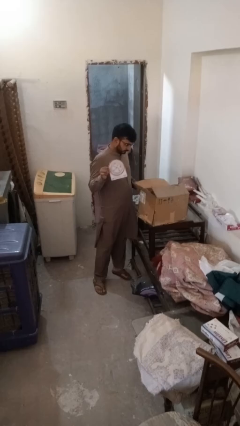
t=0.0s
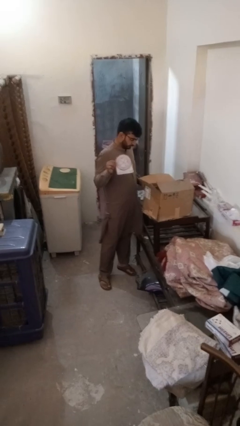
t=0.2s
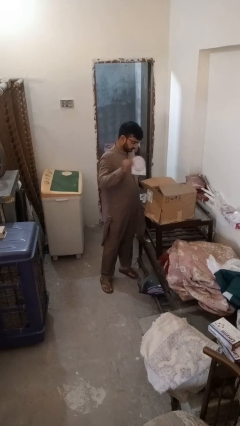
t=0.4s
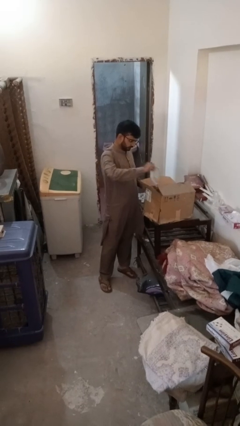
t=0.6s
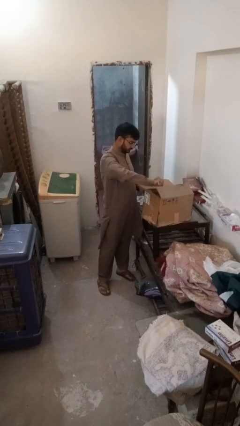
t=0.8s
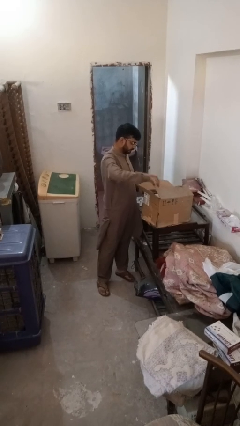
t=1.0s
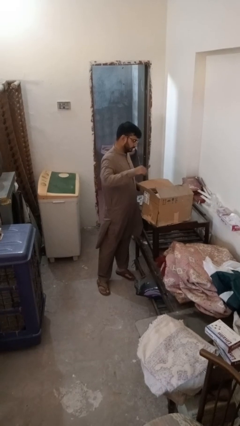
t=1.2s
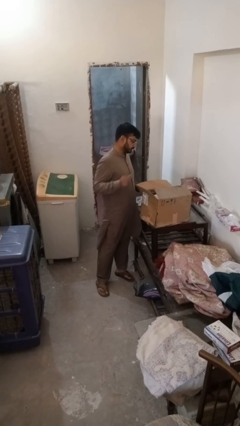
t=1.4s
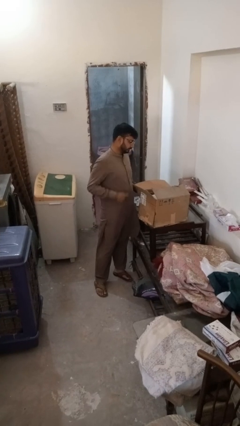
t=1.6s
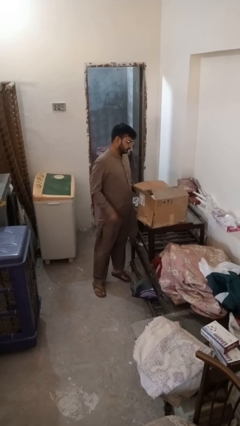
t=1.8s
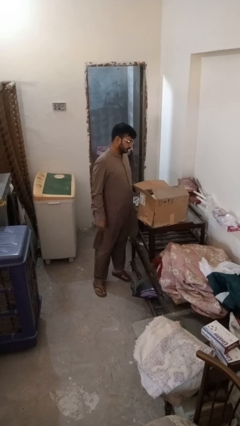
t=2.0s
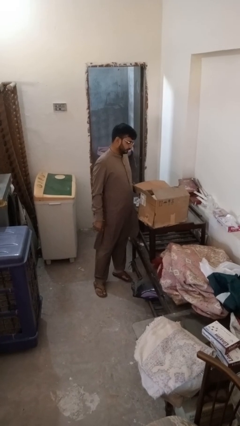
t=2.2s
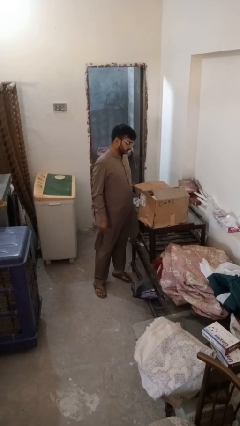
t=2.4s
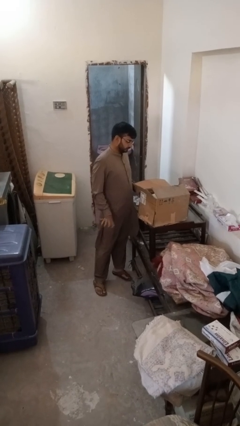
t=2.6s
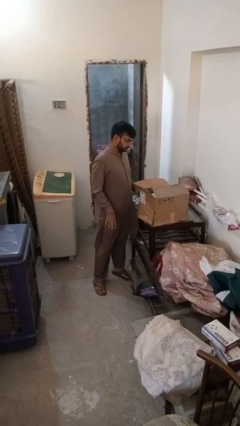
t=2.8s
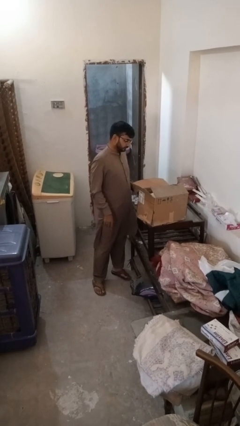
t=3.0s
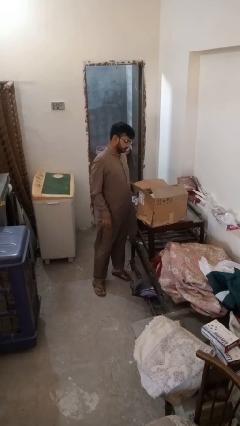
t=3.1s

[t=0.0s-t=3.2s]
person puts object into box

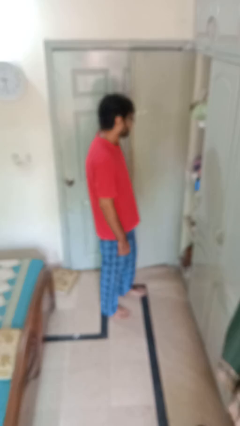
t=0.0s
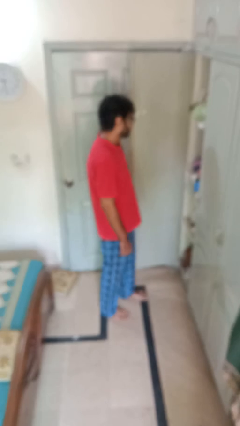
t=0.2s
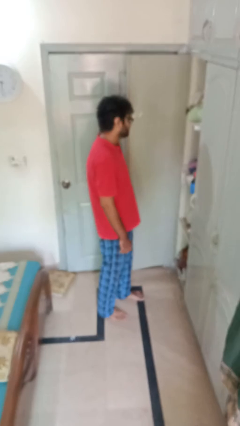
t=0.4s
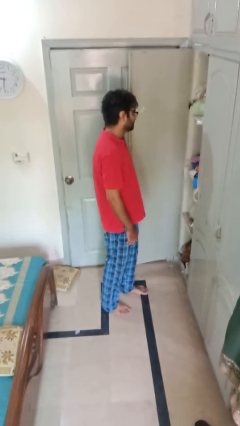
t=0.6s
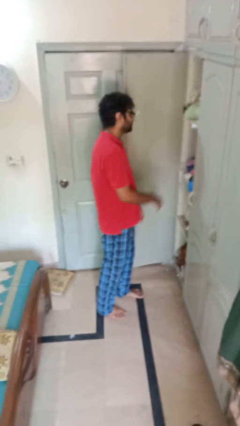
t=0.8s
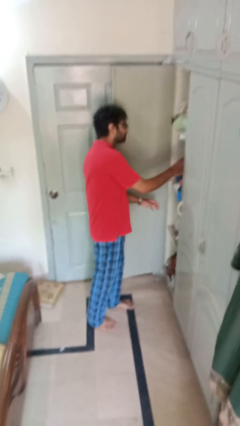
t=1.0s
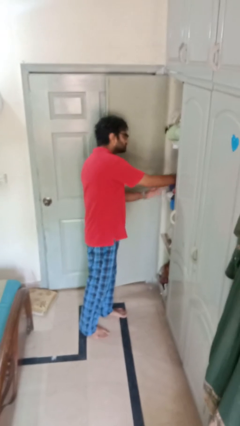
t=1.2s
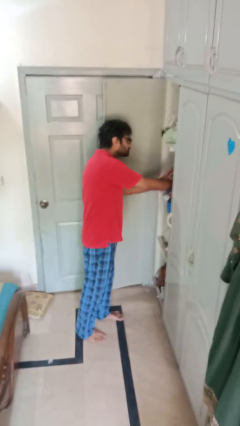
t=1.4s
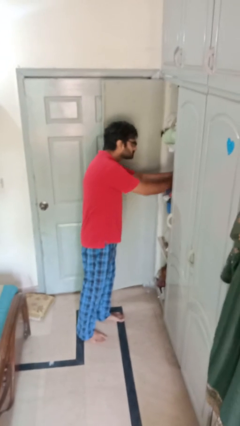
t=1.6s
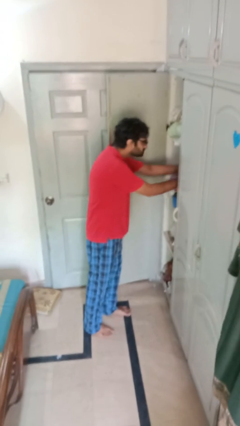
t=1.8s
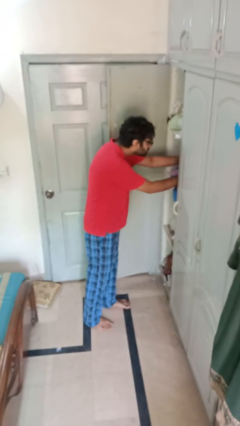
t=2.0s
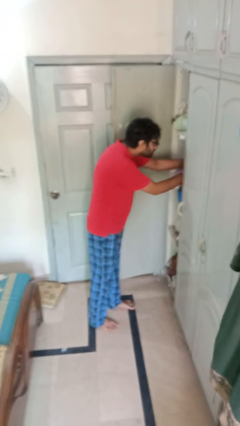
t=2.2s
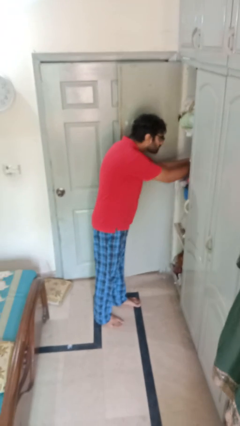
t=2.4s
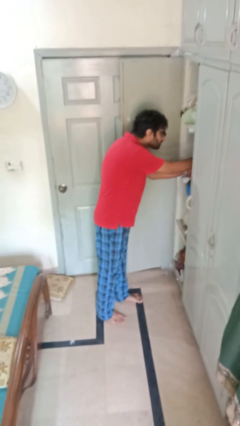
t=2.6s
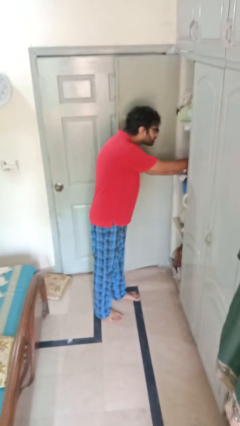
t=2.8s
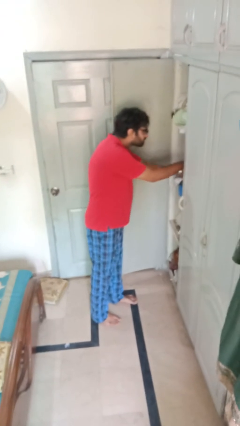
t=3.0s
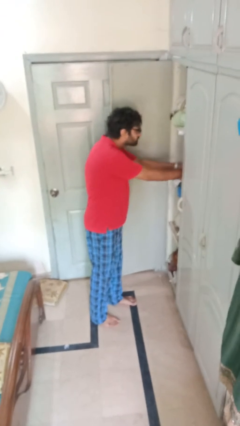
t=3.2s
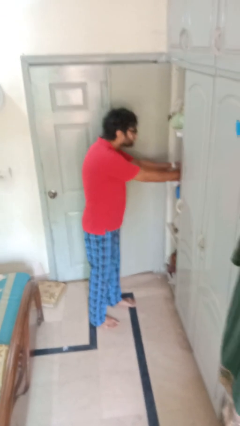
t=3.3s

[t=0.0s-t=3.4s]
person searches in cabinet

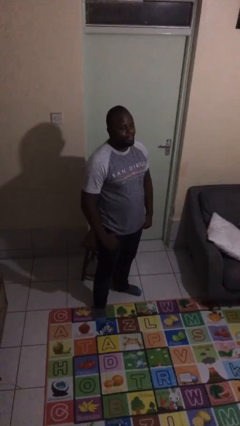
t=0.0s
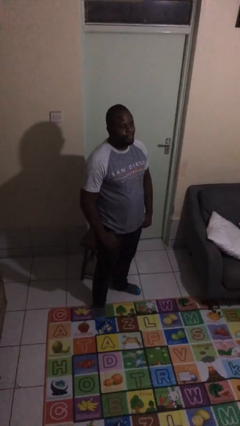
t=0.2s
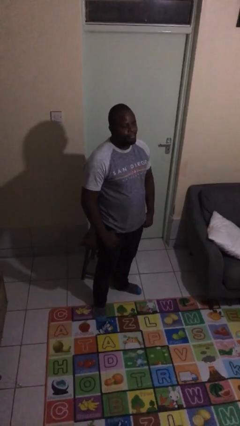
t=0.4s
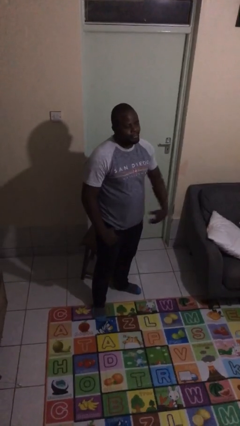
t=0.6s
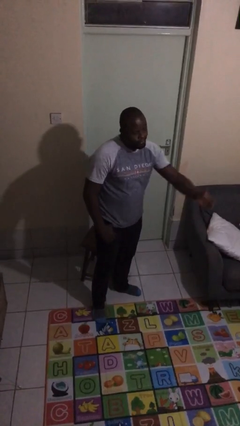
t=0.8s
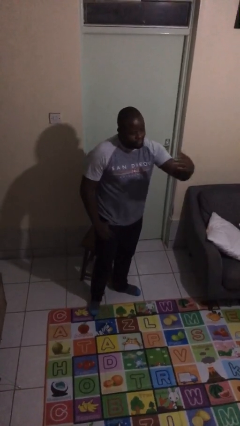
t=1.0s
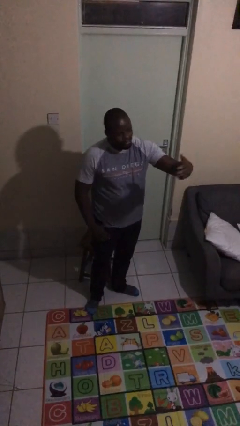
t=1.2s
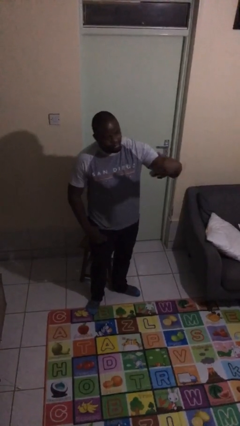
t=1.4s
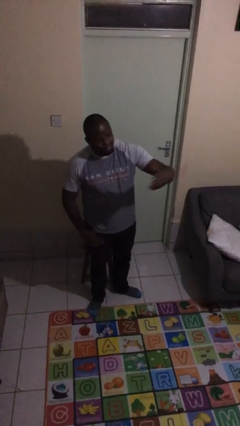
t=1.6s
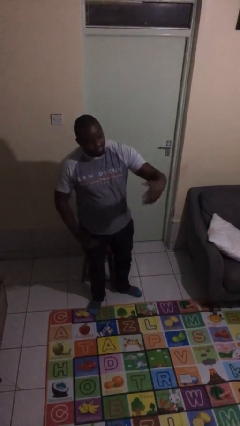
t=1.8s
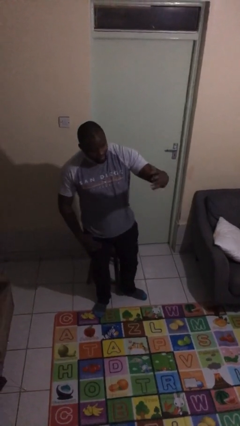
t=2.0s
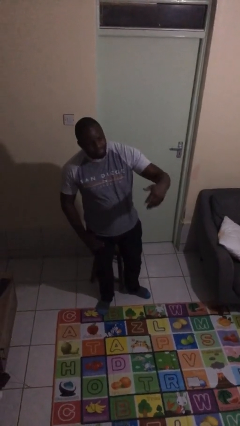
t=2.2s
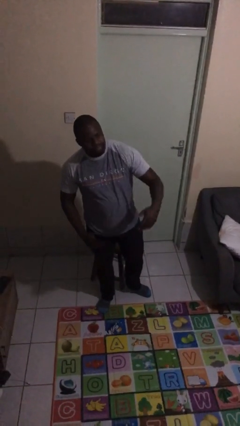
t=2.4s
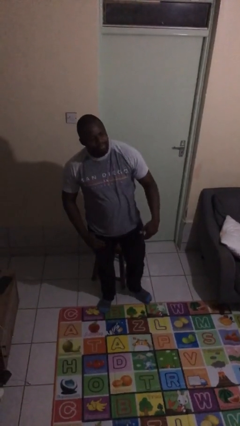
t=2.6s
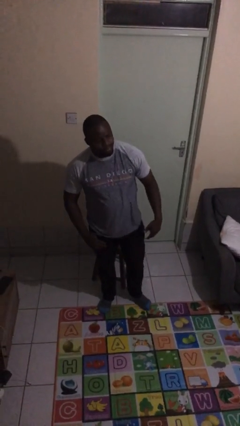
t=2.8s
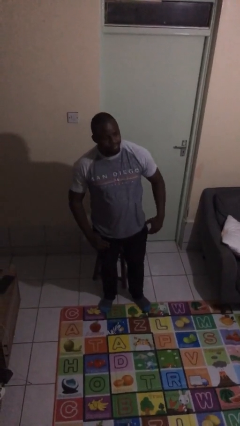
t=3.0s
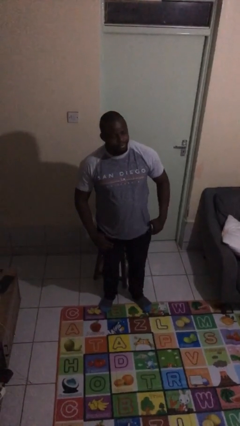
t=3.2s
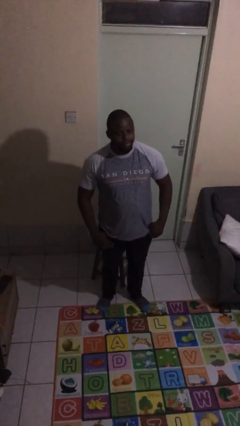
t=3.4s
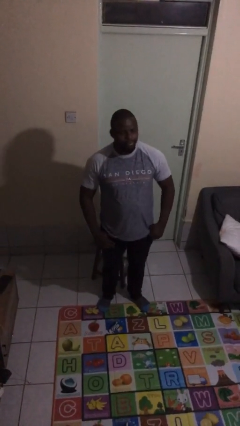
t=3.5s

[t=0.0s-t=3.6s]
person gestures come here

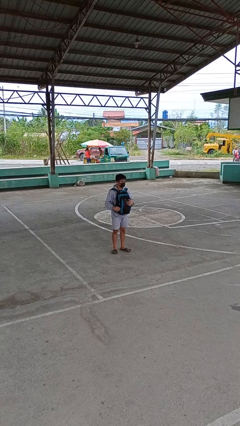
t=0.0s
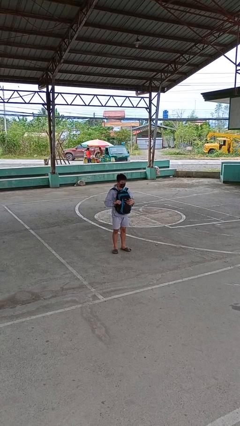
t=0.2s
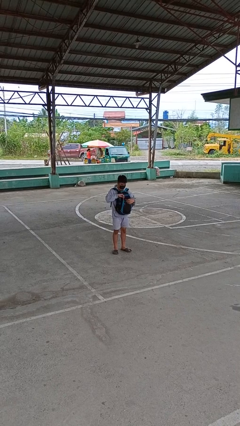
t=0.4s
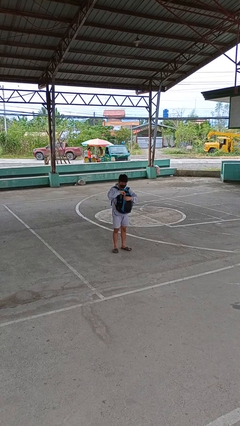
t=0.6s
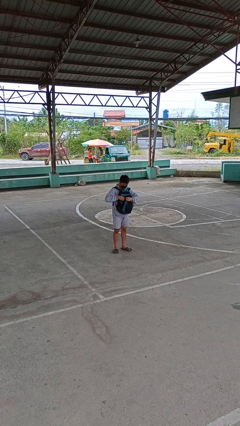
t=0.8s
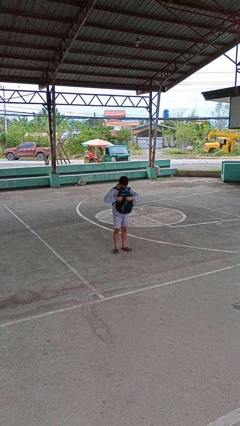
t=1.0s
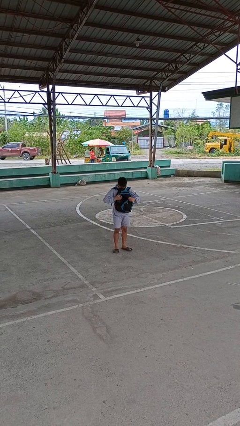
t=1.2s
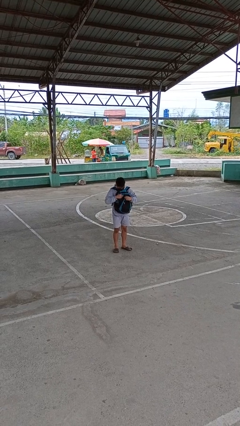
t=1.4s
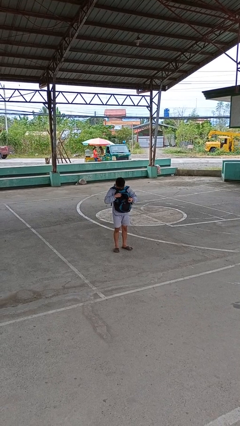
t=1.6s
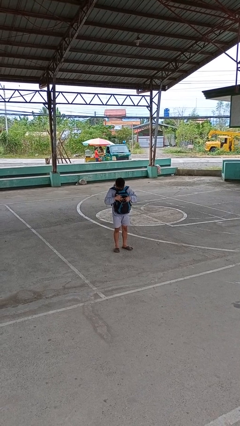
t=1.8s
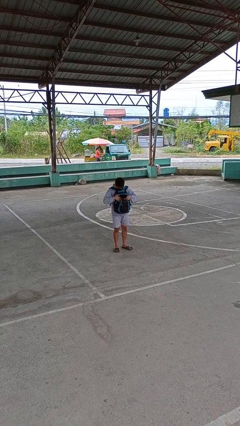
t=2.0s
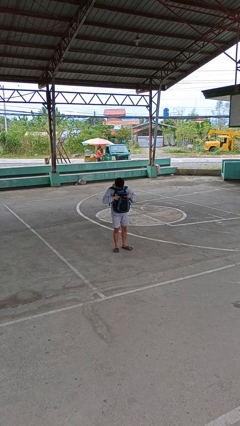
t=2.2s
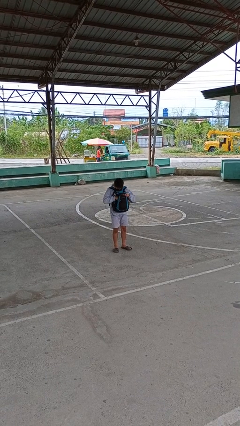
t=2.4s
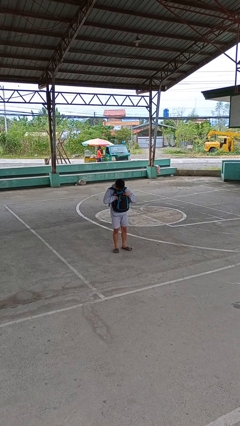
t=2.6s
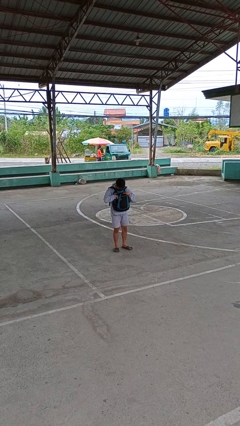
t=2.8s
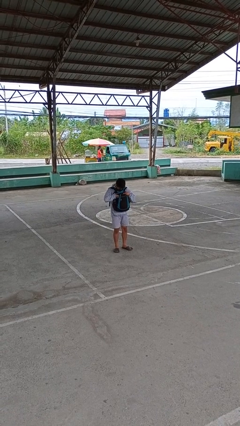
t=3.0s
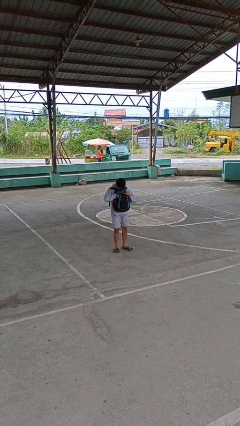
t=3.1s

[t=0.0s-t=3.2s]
person searches in backpack

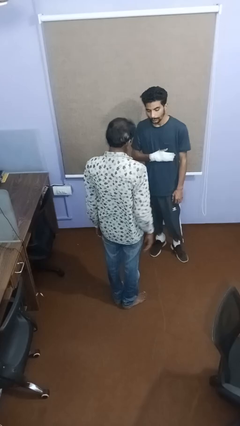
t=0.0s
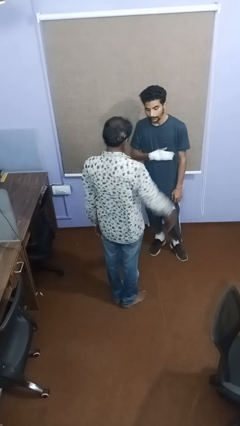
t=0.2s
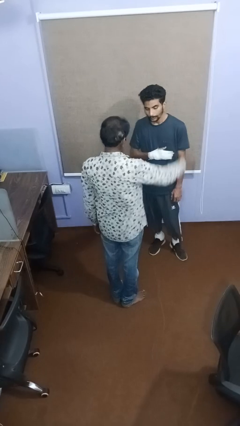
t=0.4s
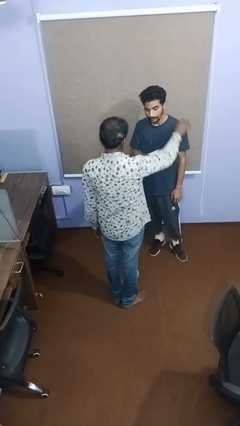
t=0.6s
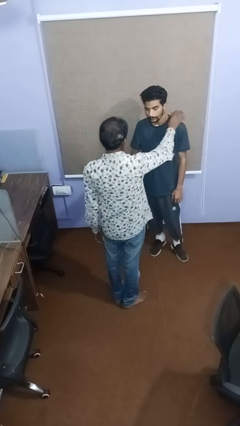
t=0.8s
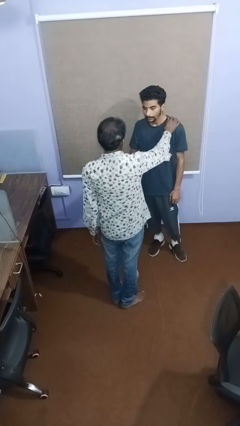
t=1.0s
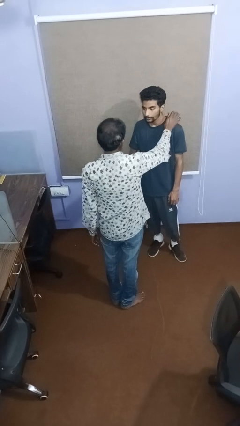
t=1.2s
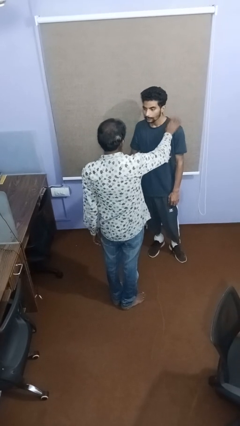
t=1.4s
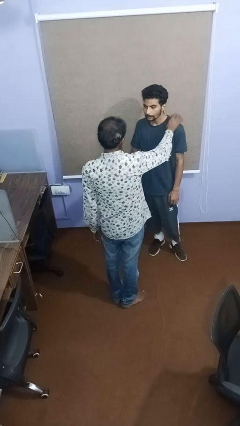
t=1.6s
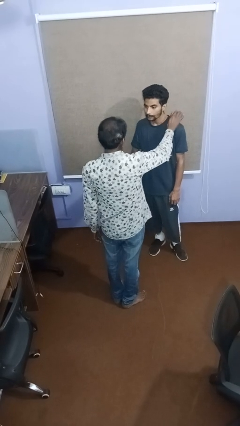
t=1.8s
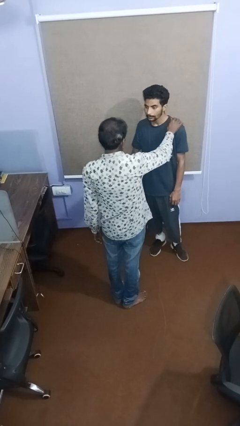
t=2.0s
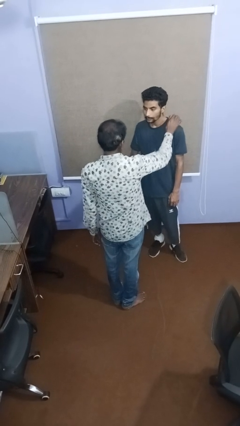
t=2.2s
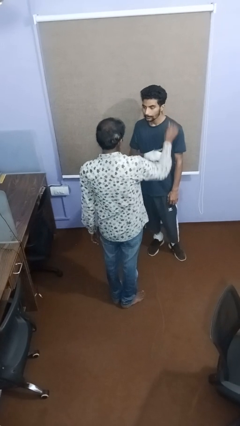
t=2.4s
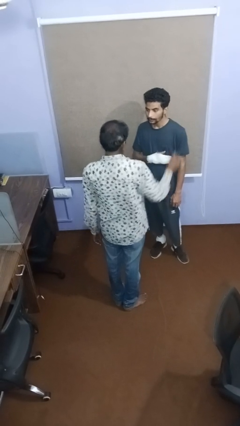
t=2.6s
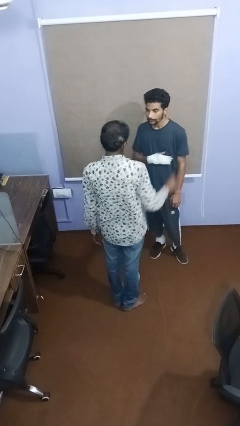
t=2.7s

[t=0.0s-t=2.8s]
person pounds shoulders of person

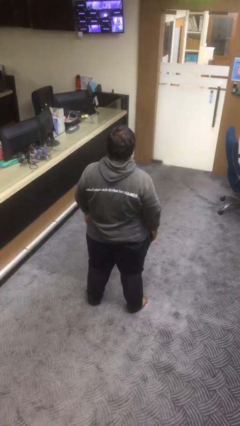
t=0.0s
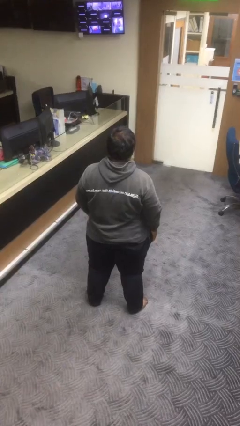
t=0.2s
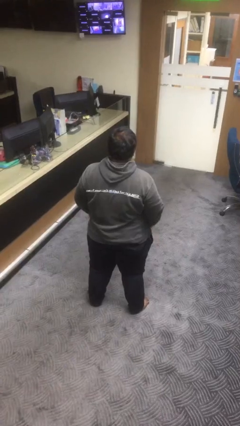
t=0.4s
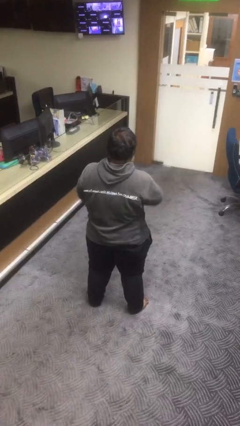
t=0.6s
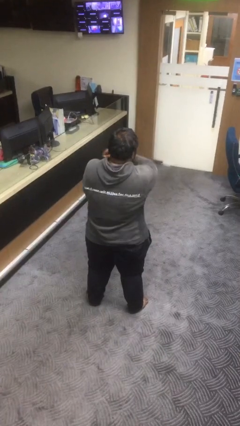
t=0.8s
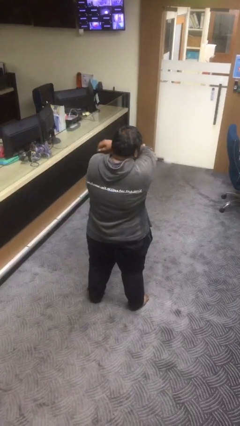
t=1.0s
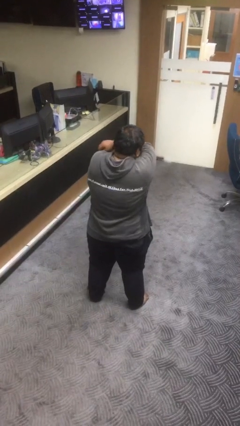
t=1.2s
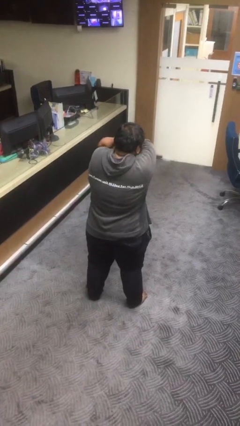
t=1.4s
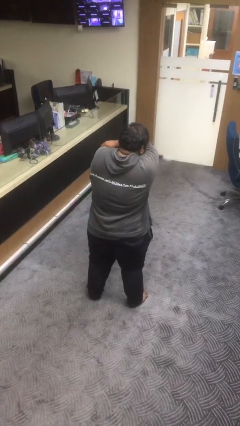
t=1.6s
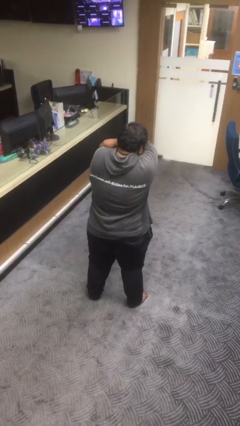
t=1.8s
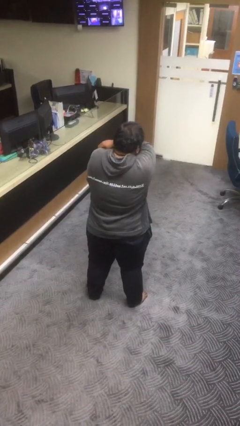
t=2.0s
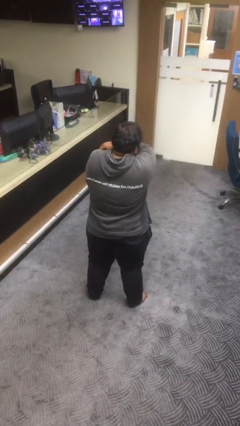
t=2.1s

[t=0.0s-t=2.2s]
person sneezes into arm
